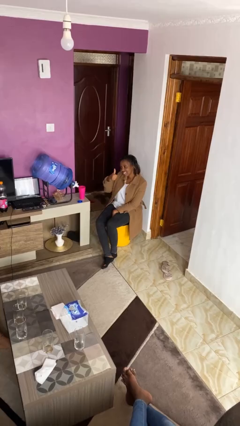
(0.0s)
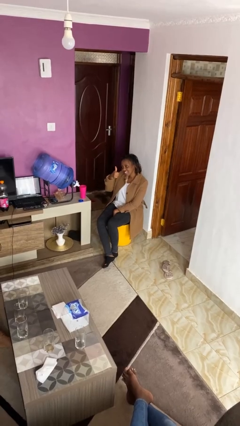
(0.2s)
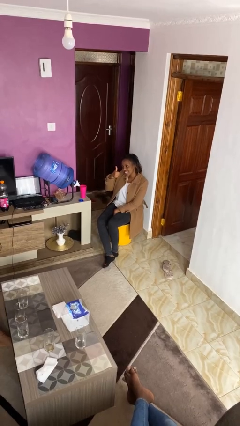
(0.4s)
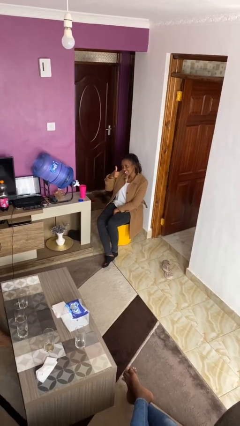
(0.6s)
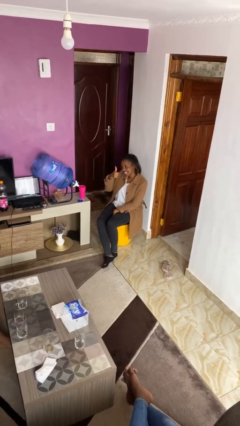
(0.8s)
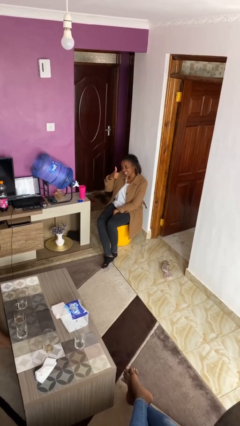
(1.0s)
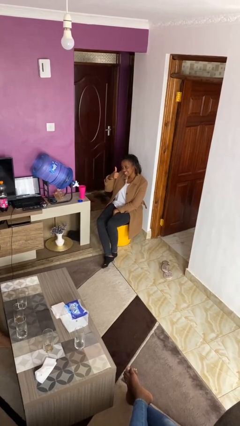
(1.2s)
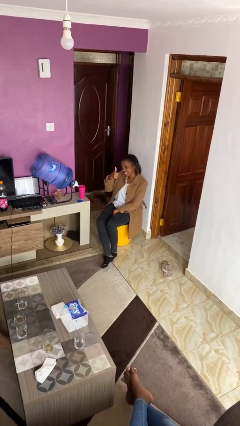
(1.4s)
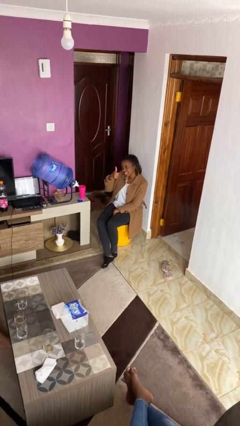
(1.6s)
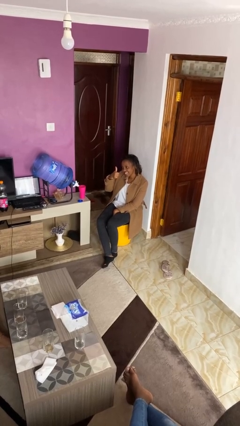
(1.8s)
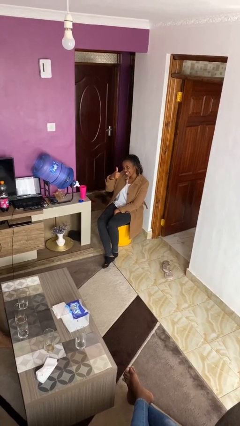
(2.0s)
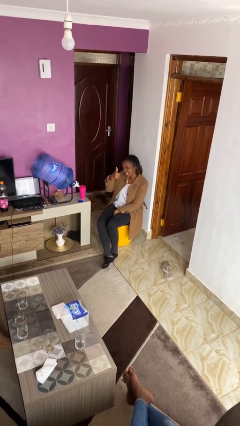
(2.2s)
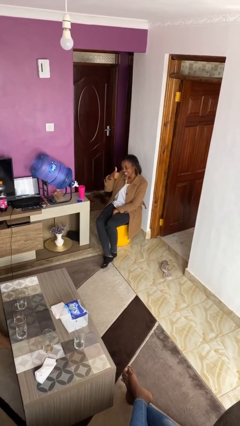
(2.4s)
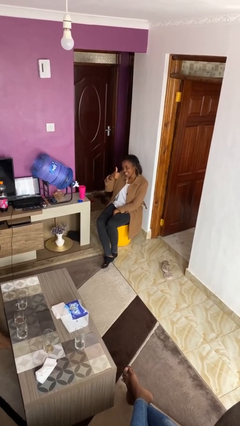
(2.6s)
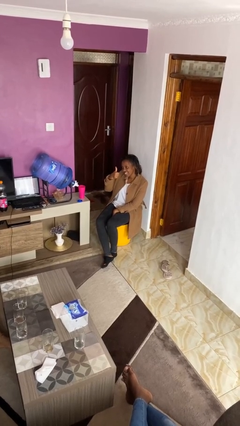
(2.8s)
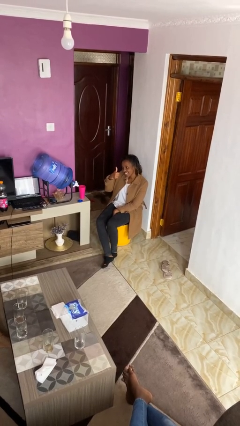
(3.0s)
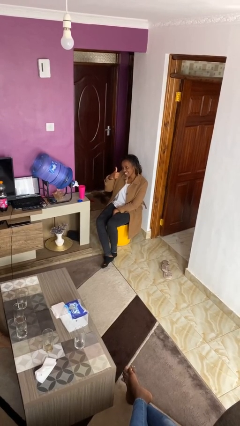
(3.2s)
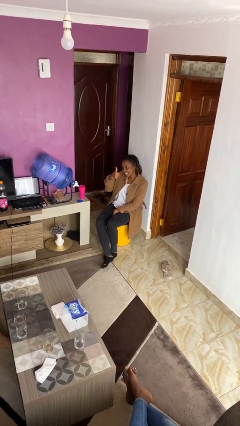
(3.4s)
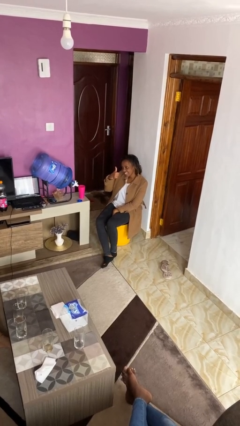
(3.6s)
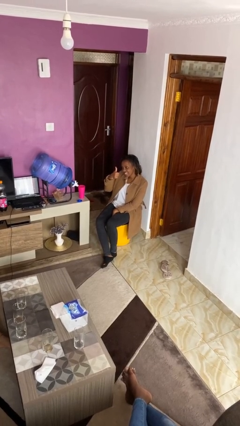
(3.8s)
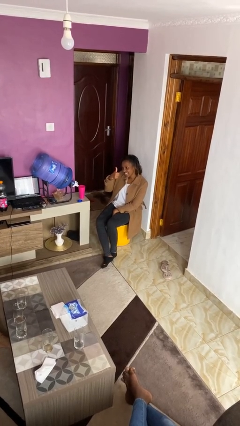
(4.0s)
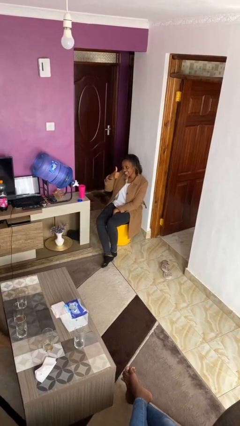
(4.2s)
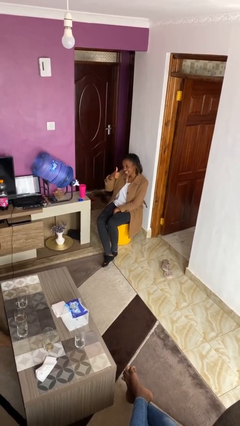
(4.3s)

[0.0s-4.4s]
person gestures thumbs up

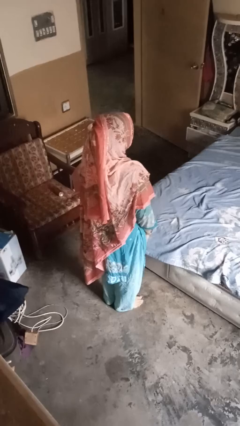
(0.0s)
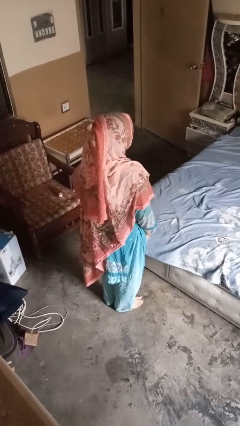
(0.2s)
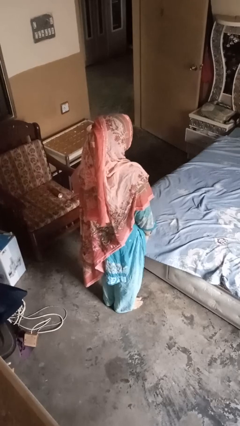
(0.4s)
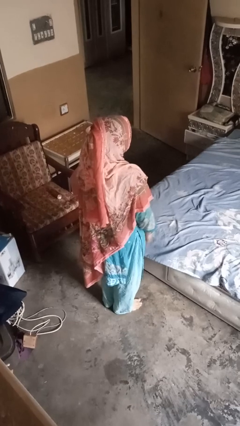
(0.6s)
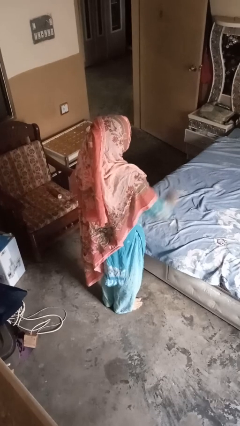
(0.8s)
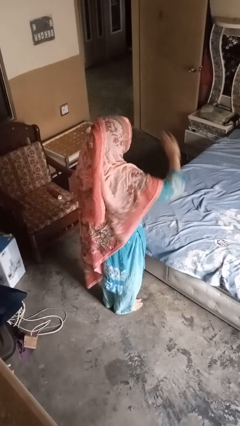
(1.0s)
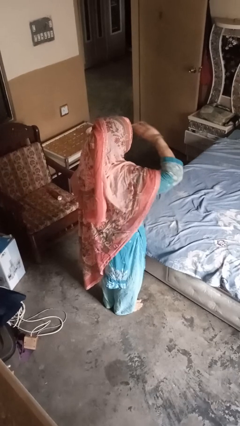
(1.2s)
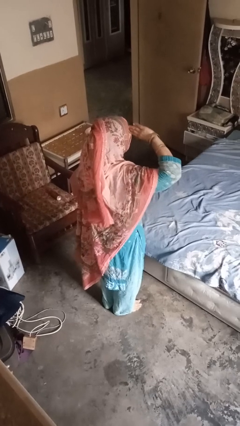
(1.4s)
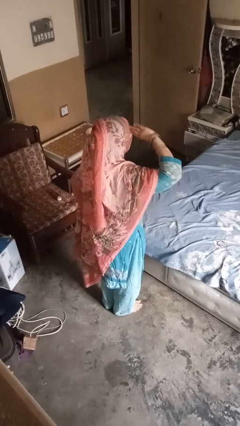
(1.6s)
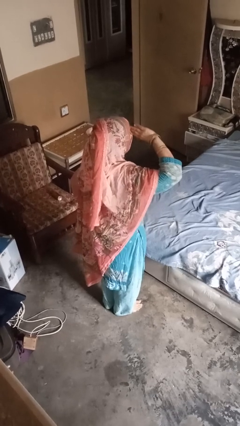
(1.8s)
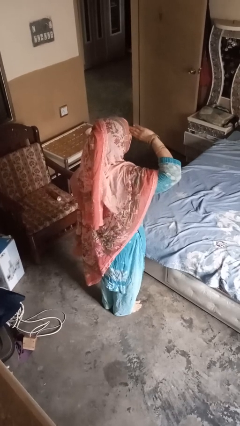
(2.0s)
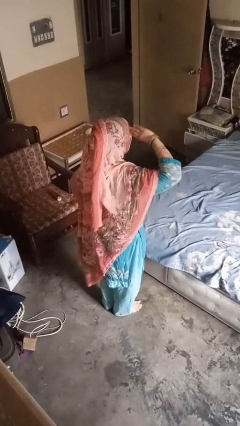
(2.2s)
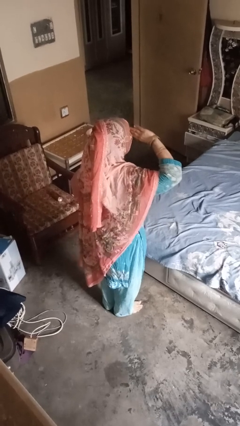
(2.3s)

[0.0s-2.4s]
person salutes

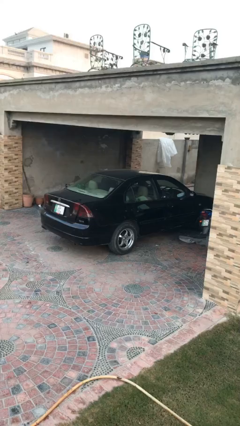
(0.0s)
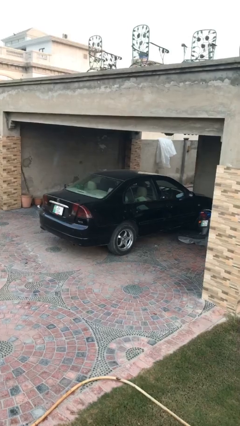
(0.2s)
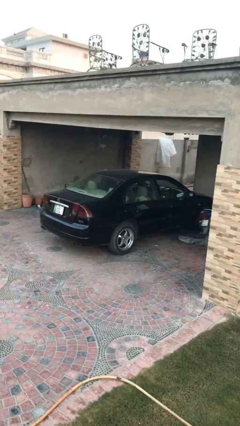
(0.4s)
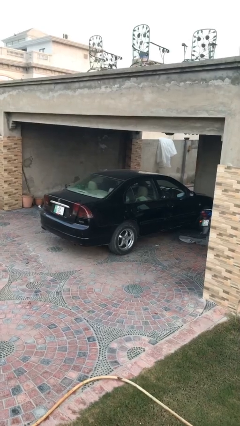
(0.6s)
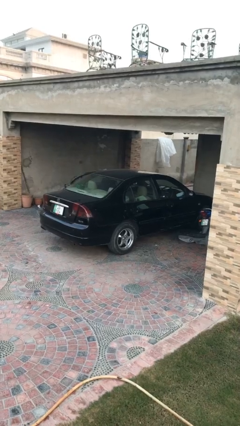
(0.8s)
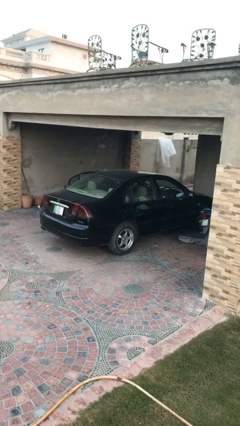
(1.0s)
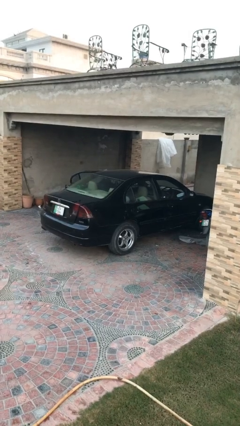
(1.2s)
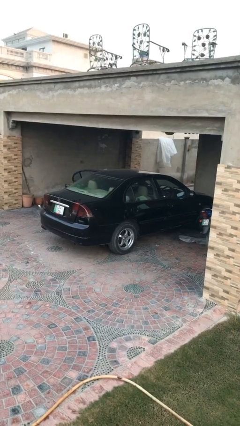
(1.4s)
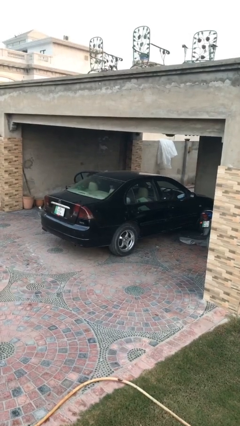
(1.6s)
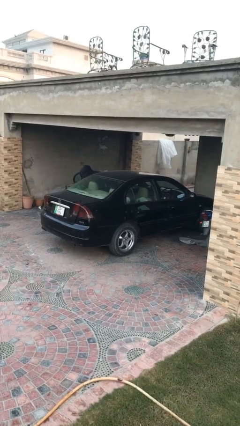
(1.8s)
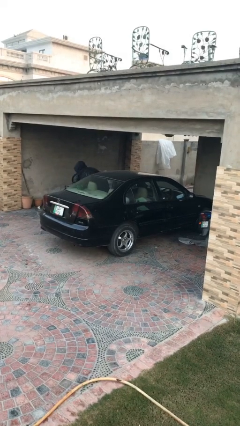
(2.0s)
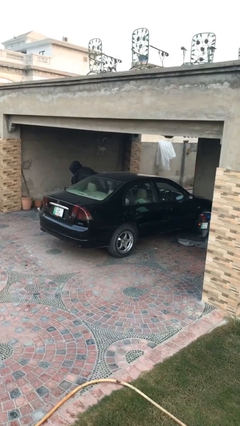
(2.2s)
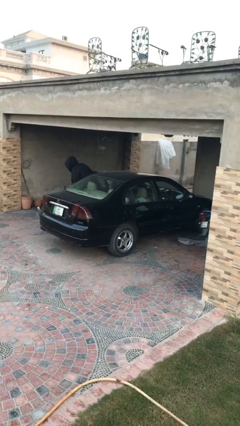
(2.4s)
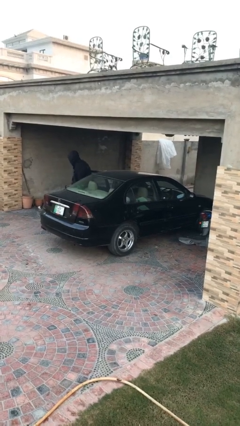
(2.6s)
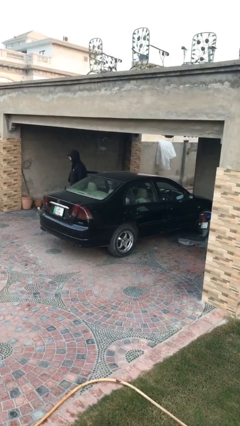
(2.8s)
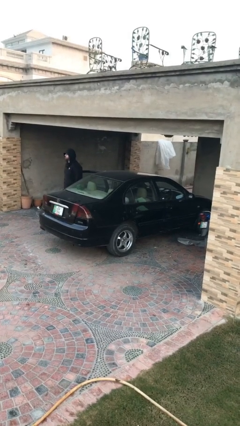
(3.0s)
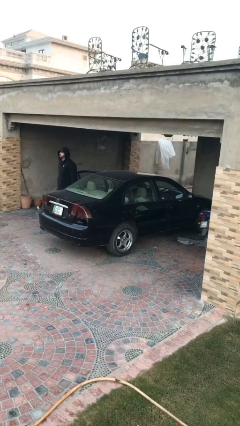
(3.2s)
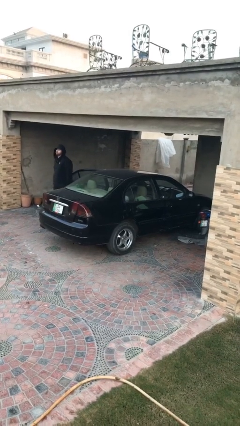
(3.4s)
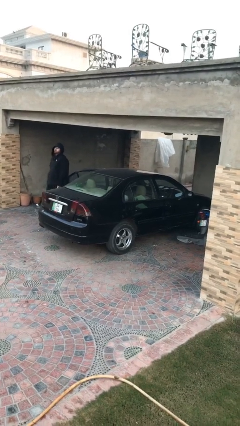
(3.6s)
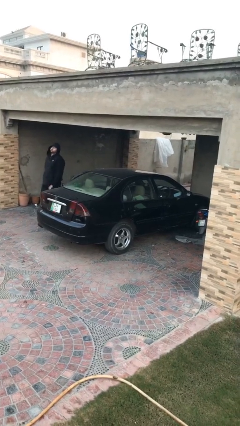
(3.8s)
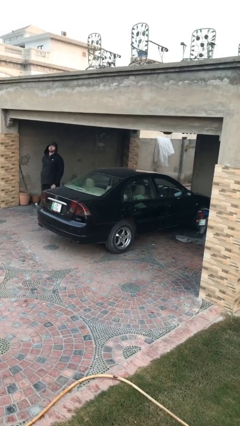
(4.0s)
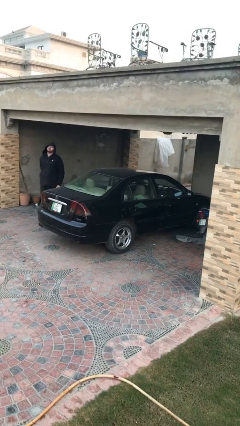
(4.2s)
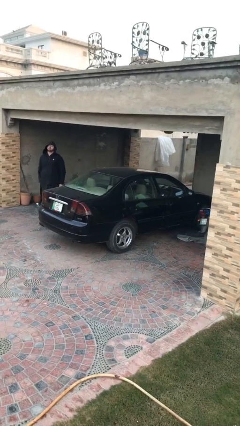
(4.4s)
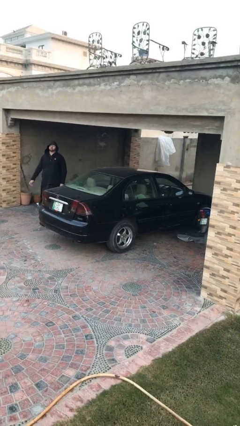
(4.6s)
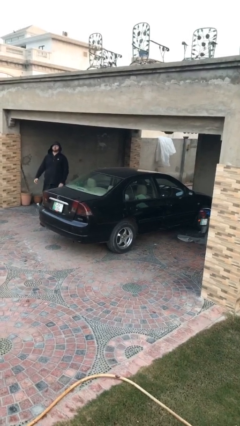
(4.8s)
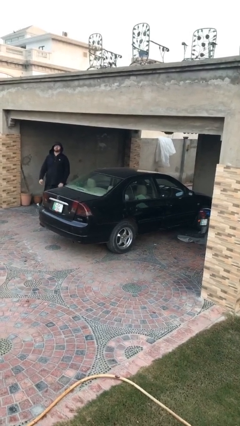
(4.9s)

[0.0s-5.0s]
car drops off person

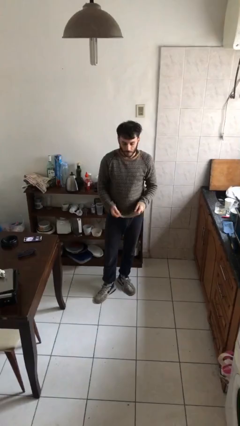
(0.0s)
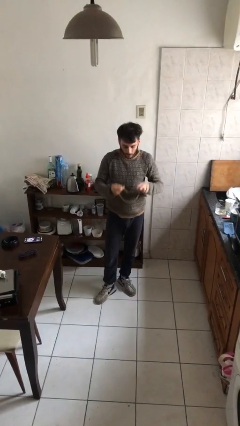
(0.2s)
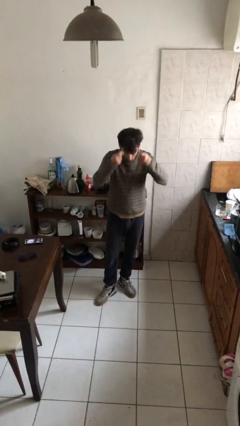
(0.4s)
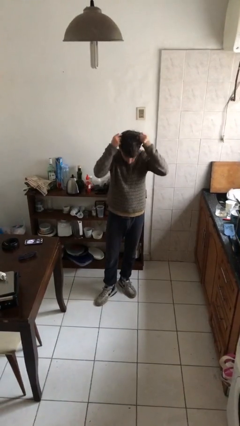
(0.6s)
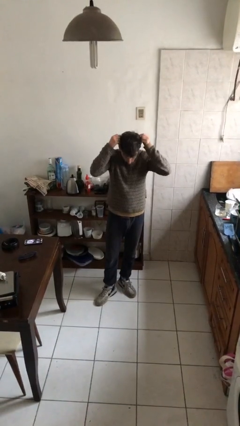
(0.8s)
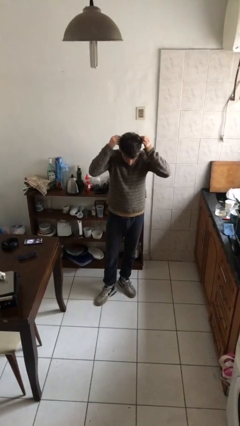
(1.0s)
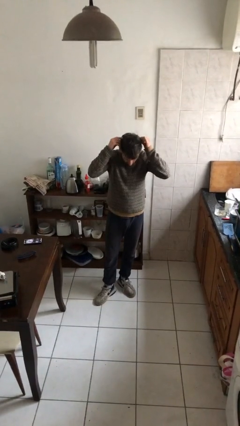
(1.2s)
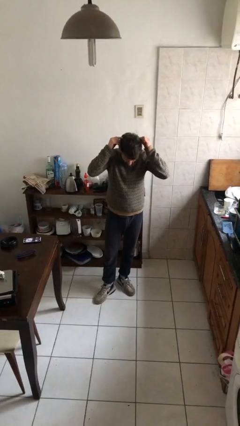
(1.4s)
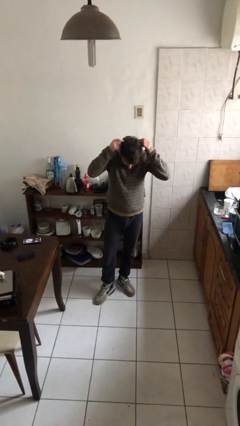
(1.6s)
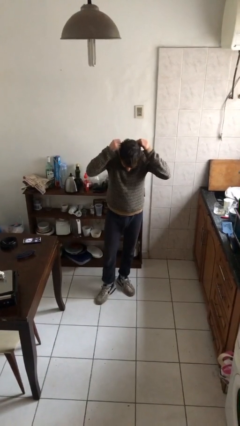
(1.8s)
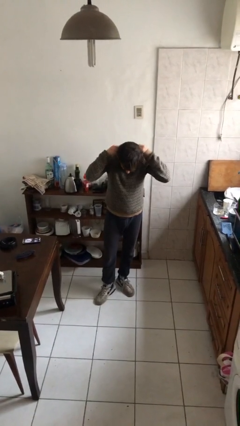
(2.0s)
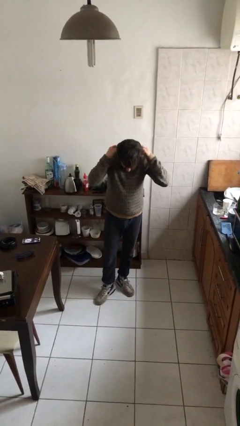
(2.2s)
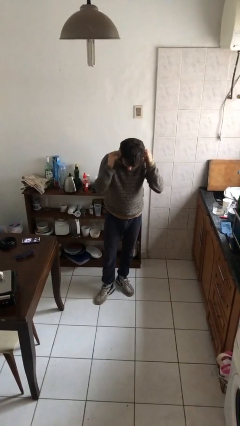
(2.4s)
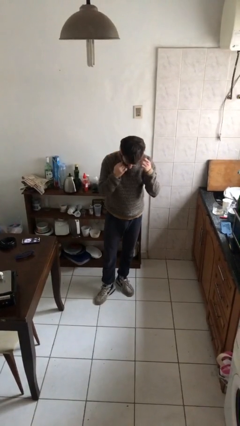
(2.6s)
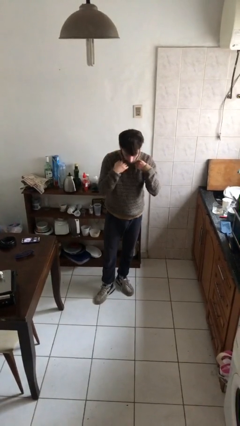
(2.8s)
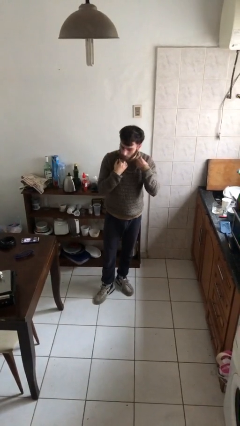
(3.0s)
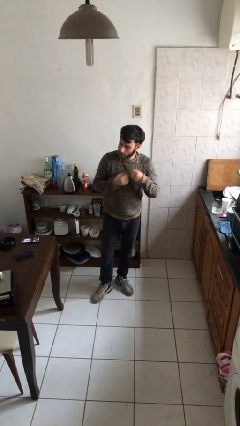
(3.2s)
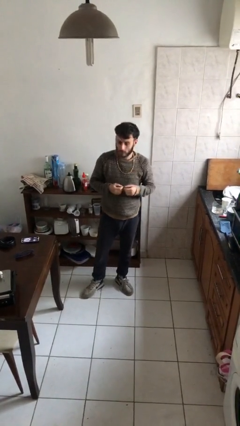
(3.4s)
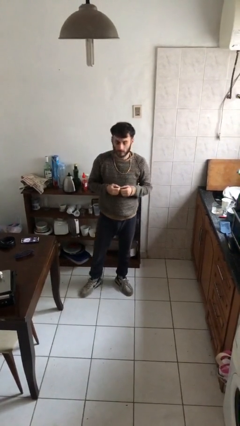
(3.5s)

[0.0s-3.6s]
person puts on necklace

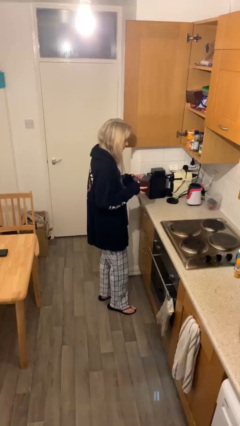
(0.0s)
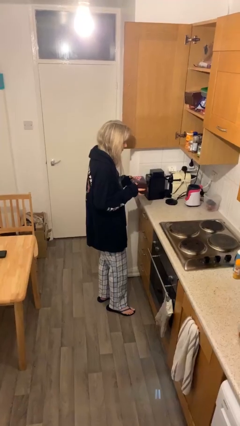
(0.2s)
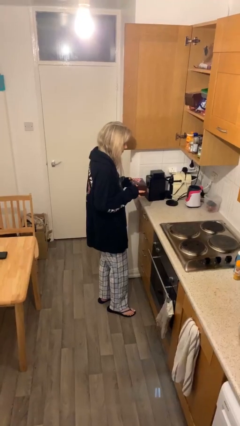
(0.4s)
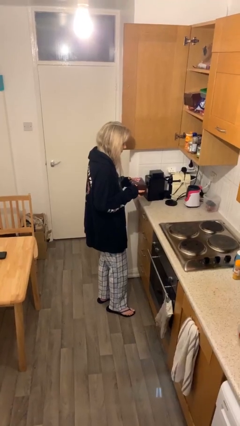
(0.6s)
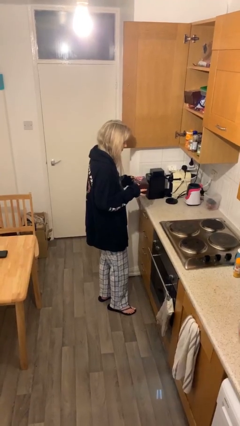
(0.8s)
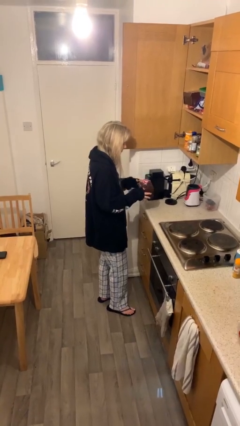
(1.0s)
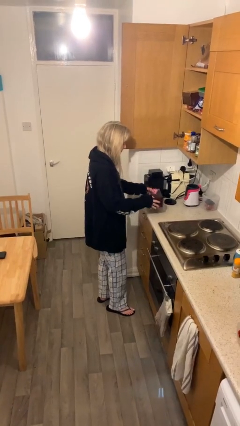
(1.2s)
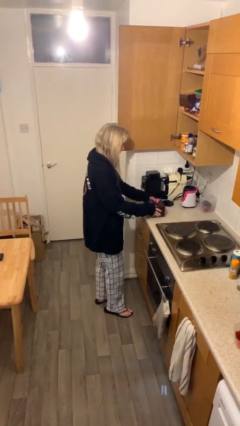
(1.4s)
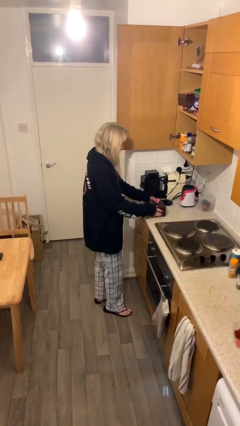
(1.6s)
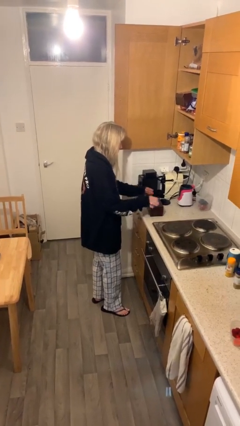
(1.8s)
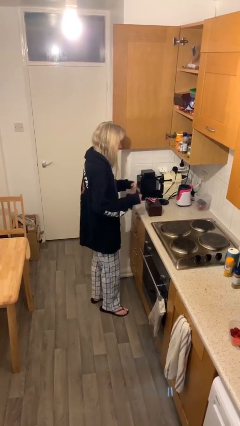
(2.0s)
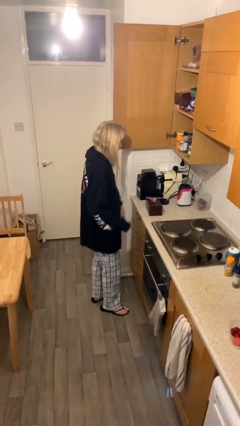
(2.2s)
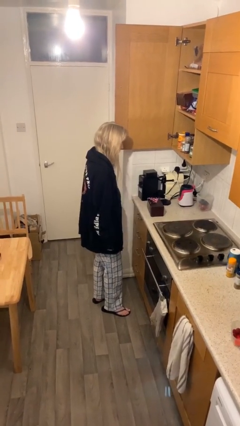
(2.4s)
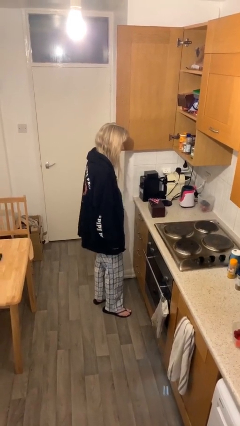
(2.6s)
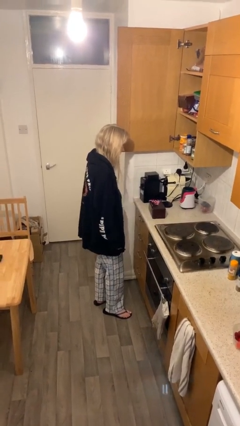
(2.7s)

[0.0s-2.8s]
person puts down object on table
